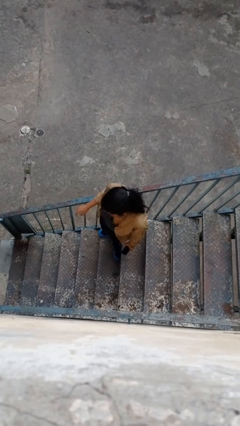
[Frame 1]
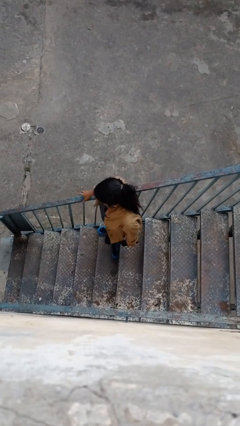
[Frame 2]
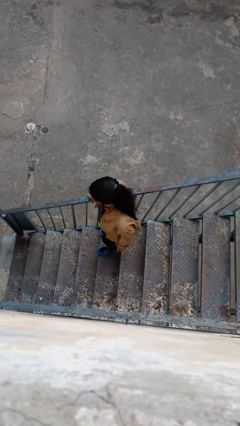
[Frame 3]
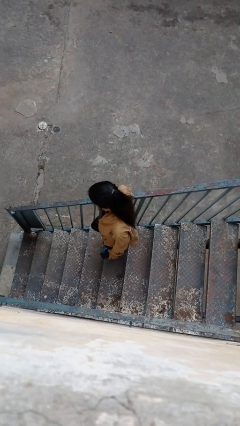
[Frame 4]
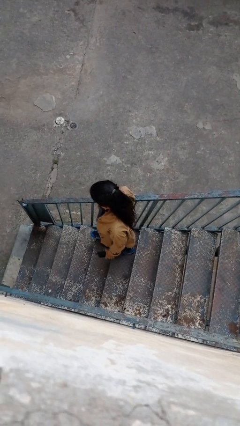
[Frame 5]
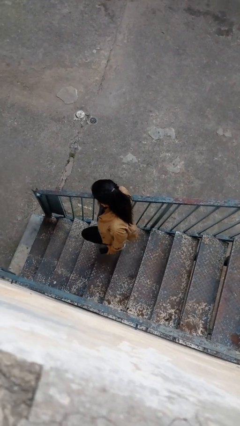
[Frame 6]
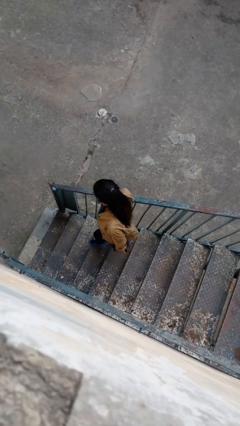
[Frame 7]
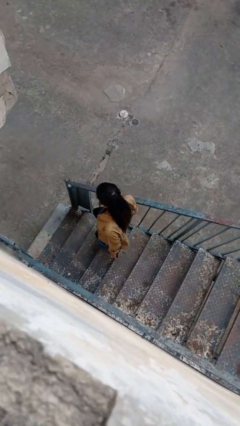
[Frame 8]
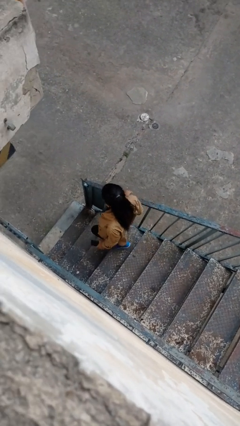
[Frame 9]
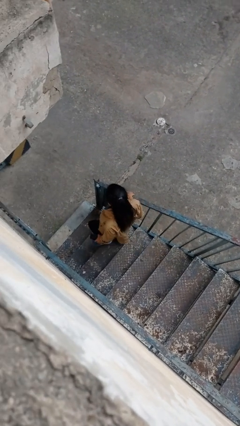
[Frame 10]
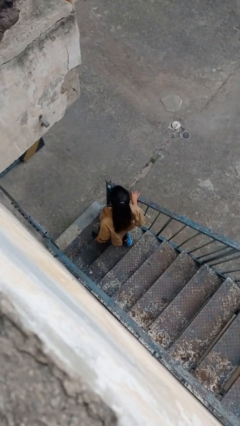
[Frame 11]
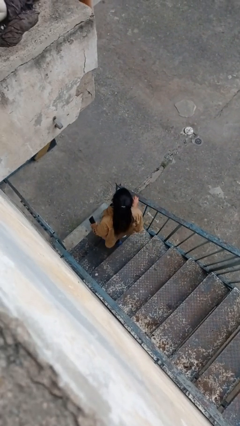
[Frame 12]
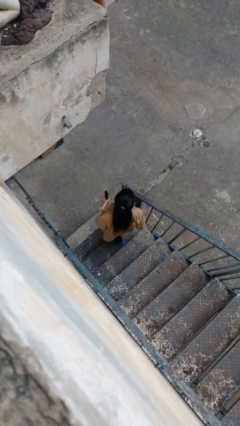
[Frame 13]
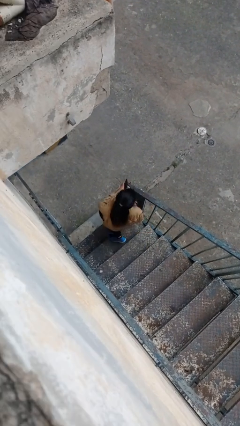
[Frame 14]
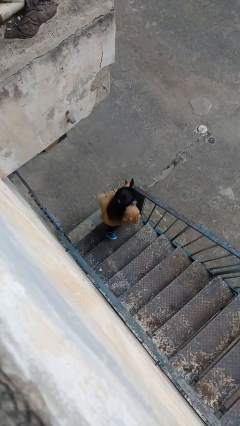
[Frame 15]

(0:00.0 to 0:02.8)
person climbs down stairs

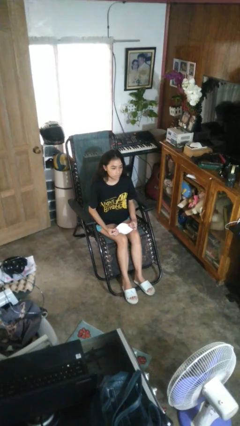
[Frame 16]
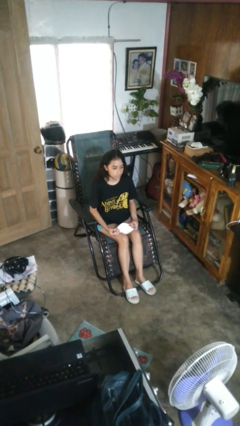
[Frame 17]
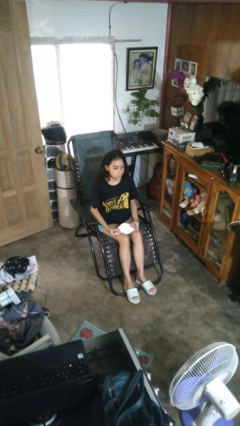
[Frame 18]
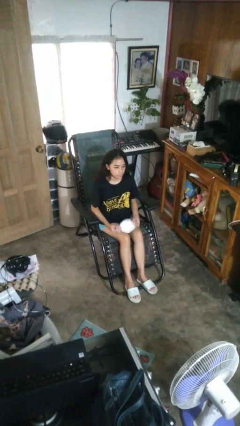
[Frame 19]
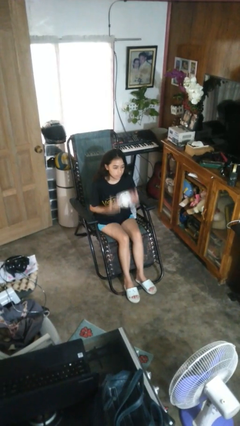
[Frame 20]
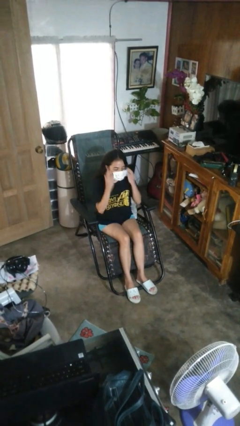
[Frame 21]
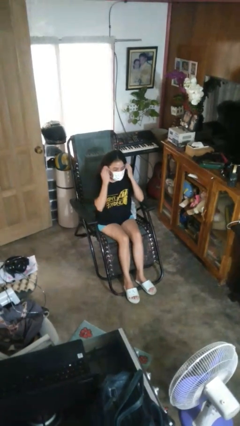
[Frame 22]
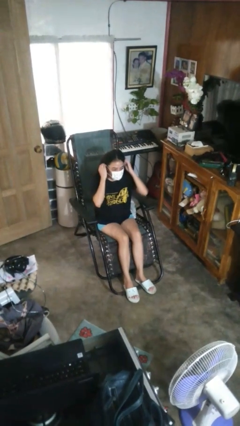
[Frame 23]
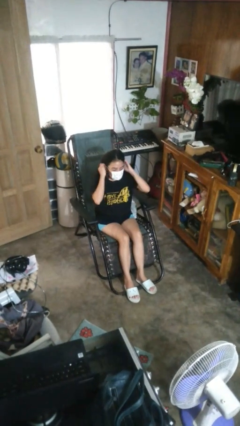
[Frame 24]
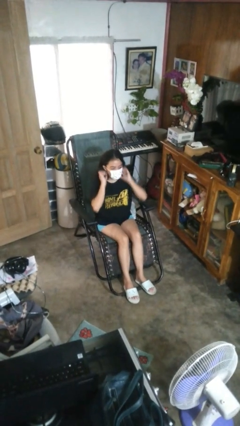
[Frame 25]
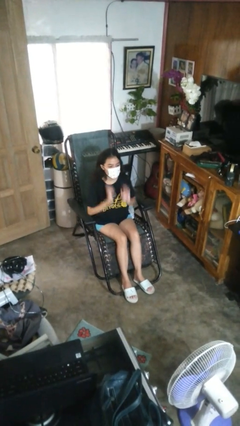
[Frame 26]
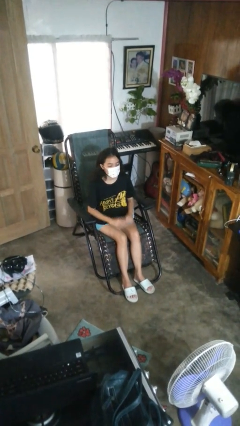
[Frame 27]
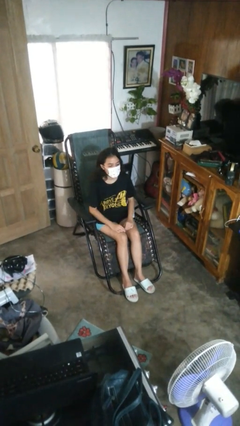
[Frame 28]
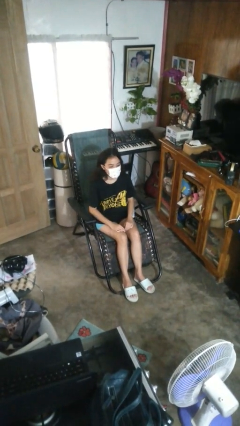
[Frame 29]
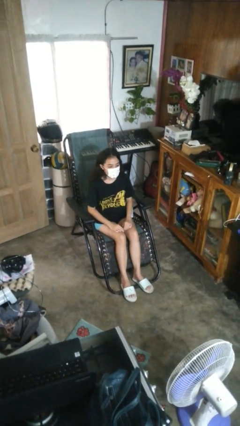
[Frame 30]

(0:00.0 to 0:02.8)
person puts on facemask

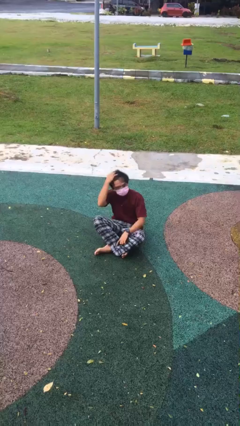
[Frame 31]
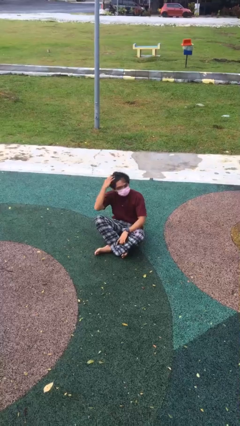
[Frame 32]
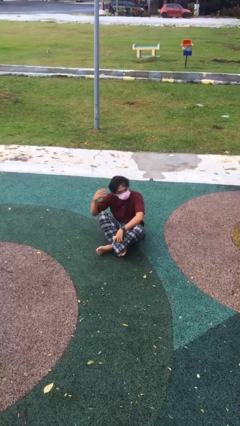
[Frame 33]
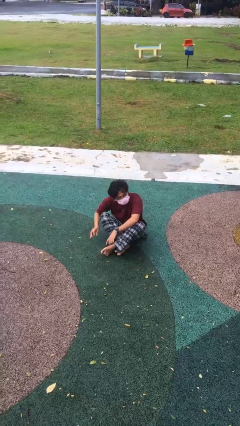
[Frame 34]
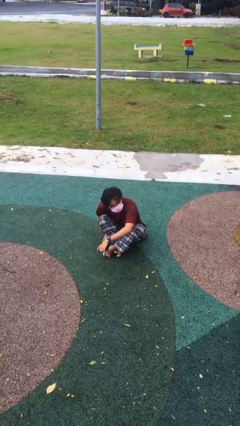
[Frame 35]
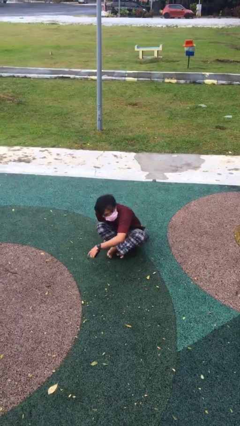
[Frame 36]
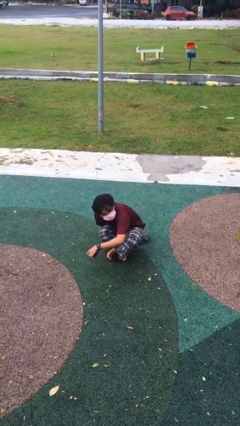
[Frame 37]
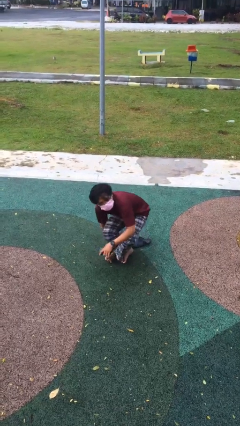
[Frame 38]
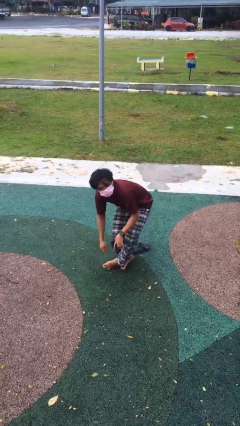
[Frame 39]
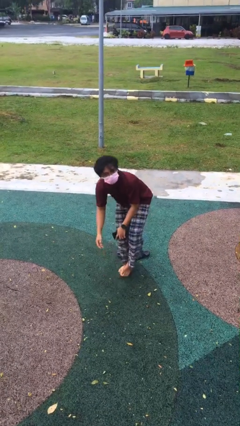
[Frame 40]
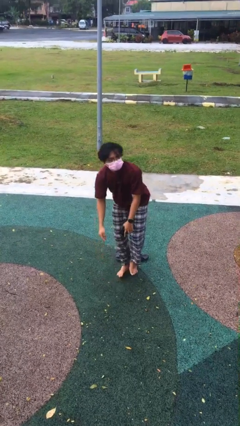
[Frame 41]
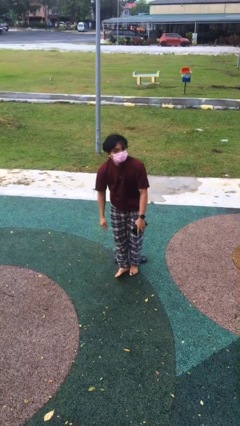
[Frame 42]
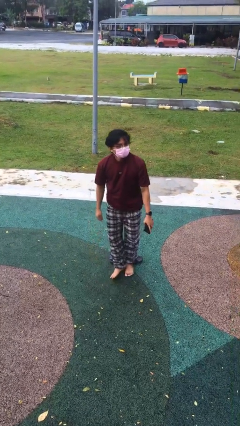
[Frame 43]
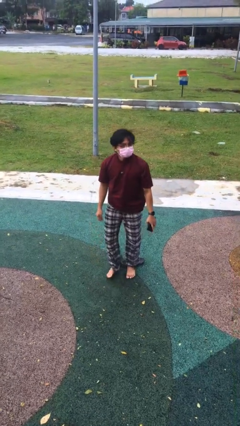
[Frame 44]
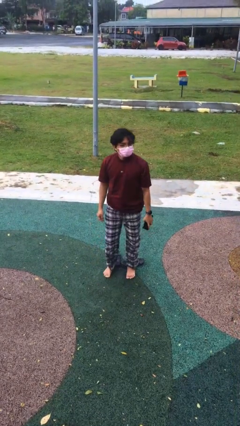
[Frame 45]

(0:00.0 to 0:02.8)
person stands up from floor

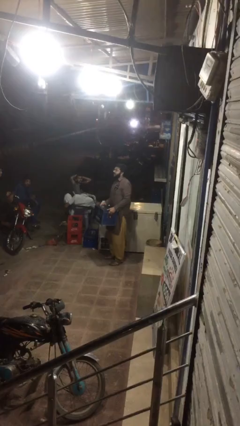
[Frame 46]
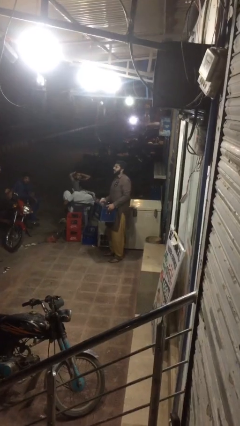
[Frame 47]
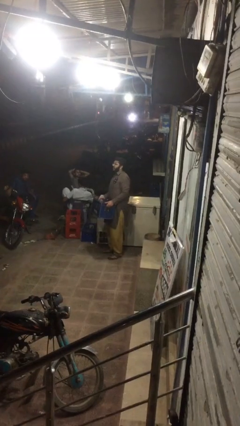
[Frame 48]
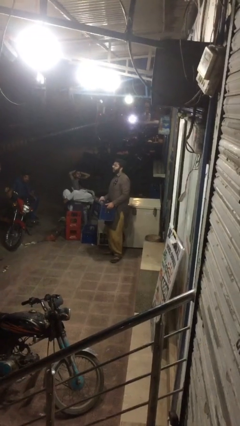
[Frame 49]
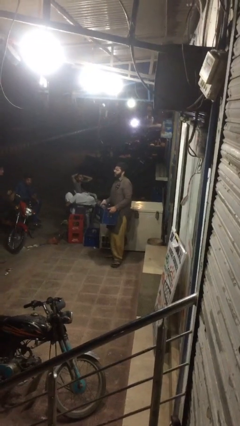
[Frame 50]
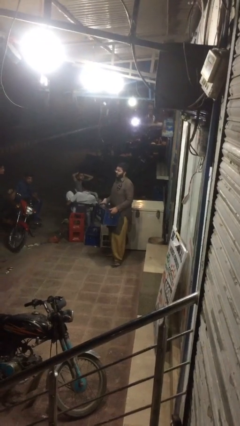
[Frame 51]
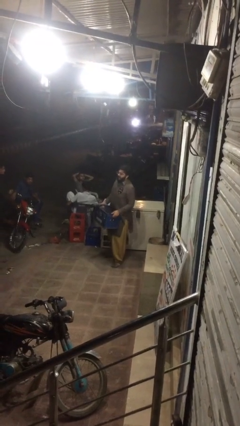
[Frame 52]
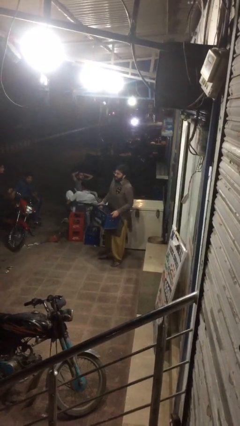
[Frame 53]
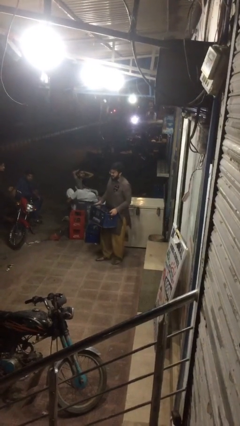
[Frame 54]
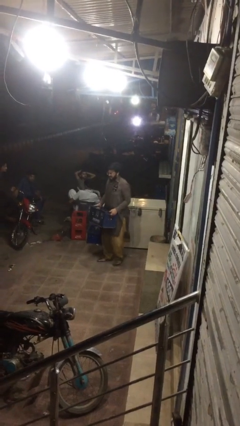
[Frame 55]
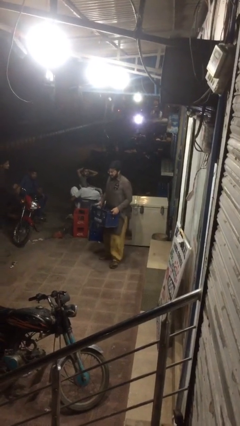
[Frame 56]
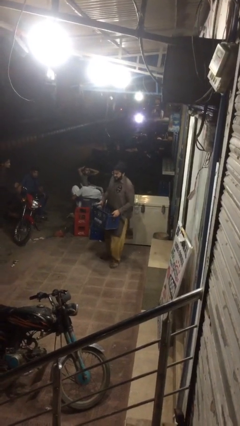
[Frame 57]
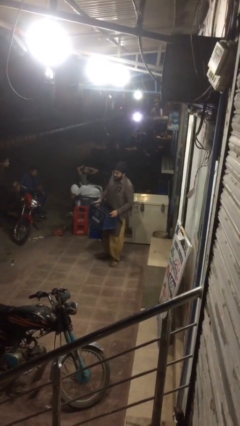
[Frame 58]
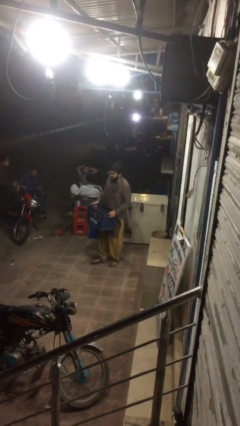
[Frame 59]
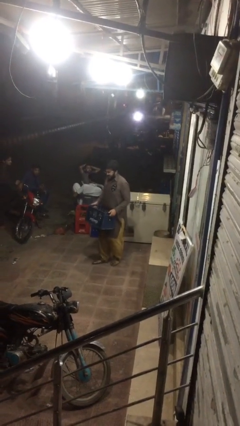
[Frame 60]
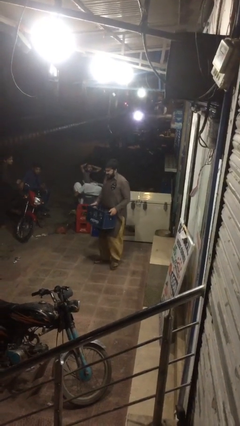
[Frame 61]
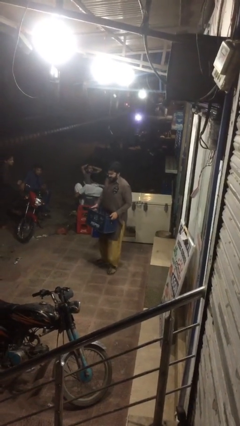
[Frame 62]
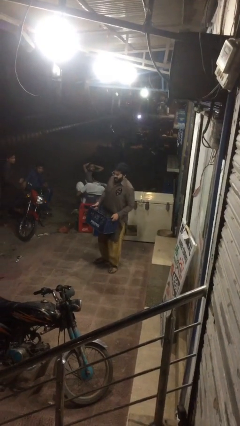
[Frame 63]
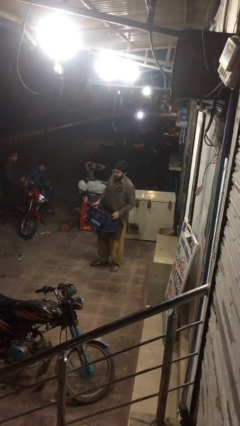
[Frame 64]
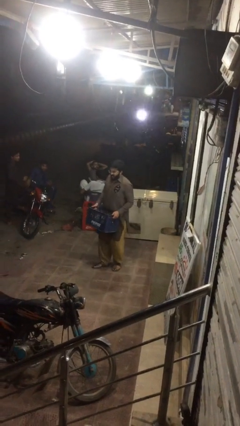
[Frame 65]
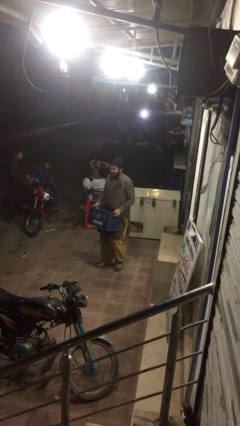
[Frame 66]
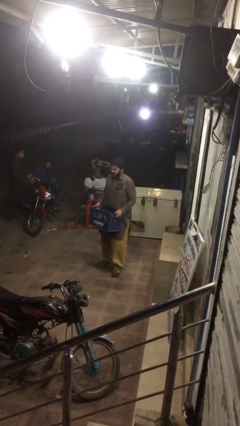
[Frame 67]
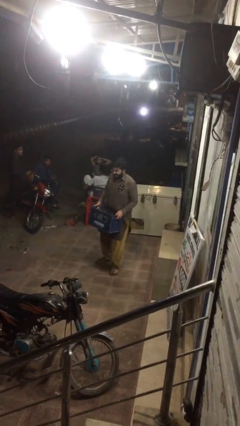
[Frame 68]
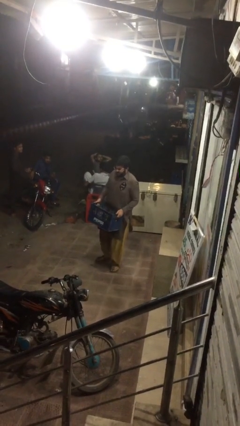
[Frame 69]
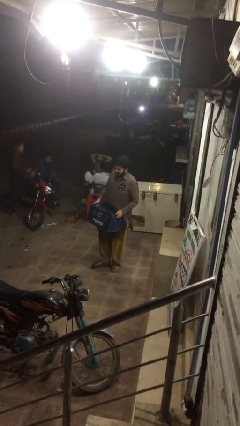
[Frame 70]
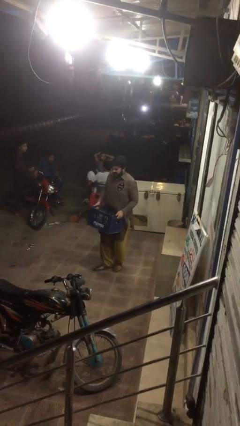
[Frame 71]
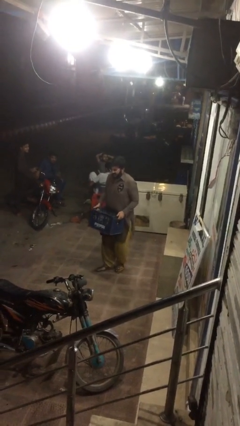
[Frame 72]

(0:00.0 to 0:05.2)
person carries heavy object

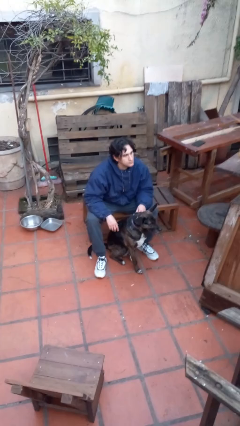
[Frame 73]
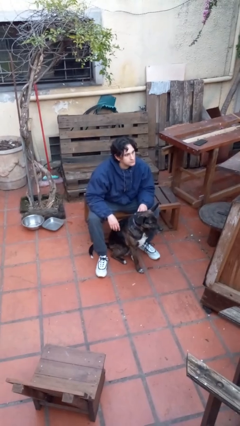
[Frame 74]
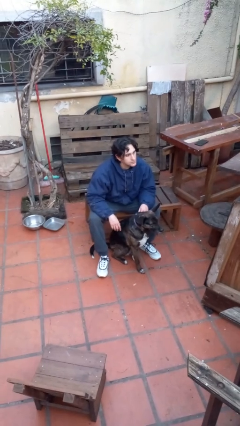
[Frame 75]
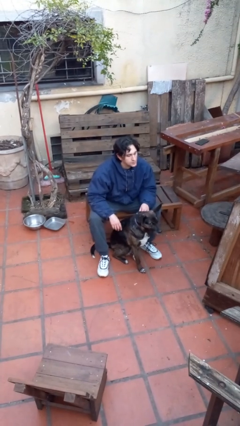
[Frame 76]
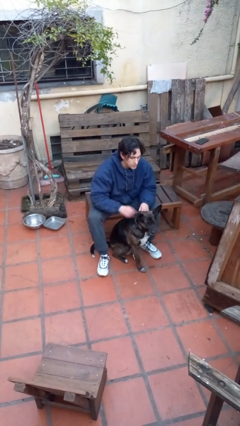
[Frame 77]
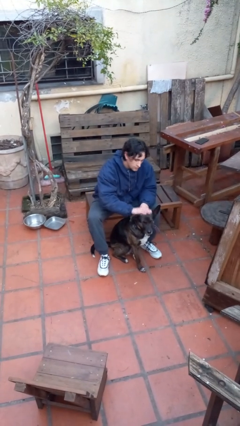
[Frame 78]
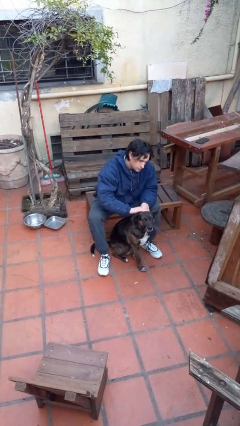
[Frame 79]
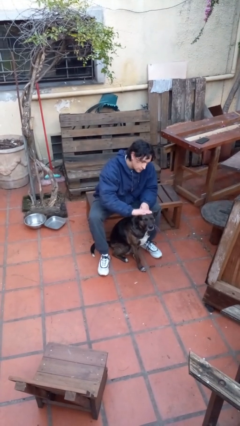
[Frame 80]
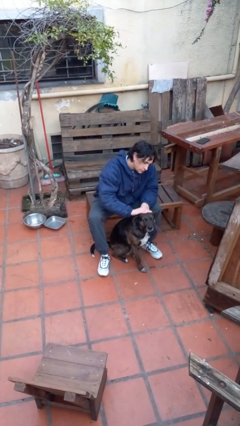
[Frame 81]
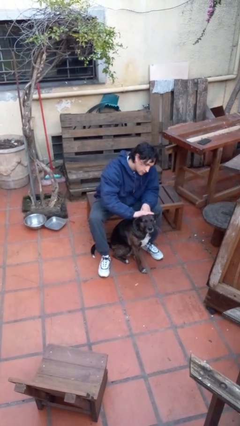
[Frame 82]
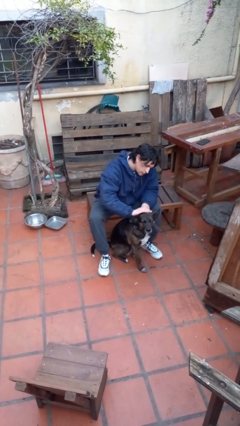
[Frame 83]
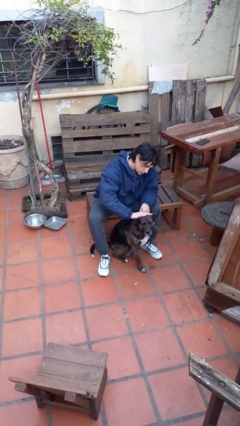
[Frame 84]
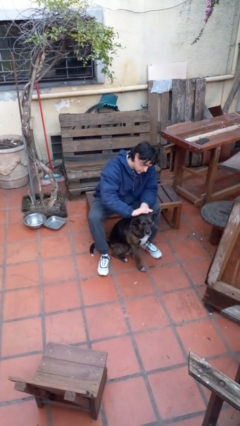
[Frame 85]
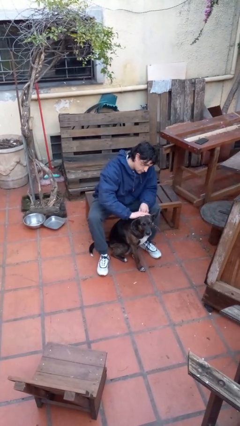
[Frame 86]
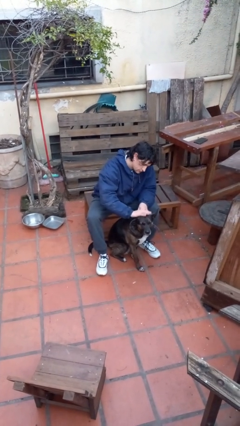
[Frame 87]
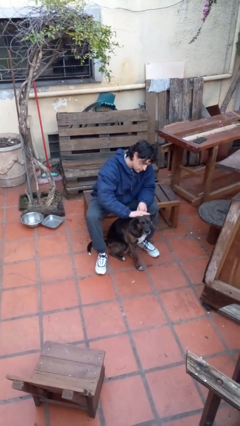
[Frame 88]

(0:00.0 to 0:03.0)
person pets dog

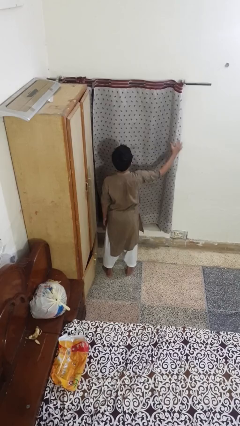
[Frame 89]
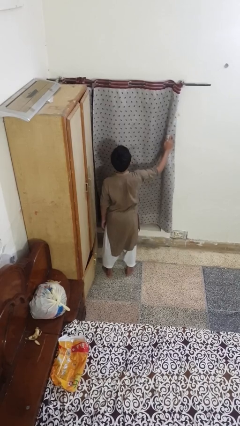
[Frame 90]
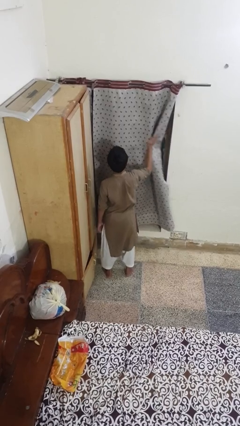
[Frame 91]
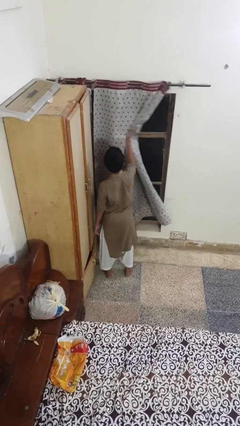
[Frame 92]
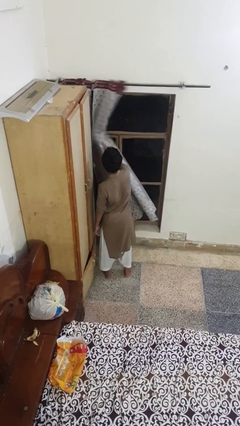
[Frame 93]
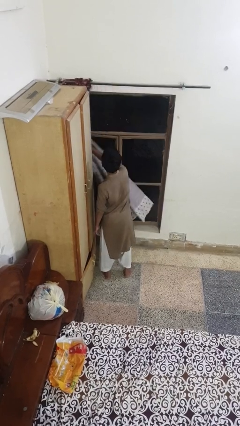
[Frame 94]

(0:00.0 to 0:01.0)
person opens curtains

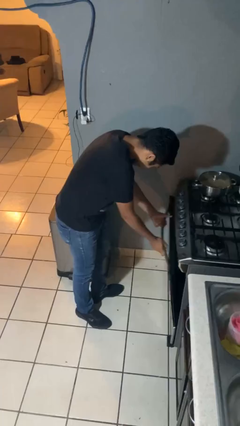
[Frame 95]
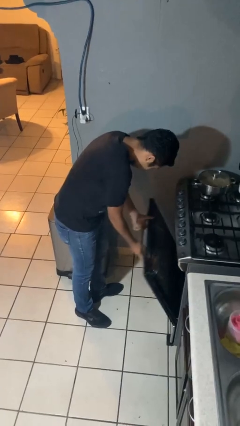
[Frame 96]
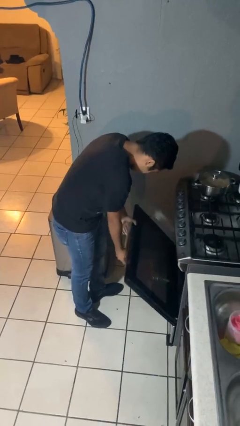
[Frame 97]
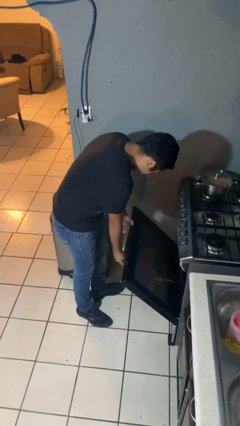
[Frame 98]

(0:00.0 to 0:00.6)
person opens oven door
